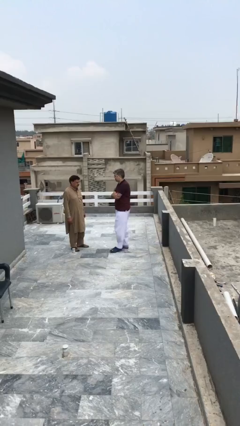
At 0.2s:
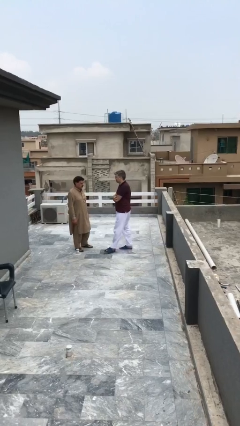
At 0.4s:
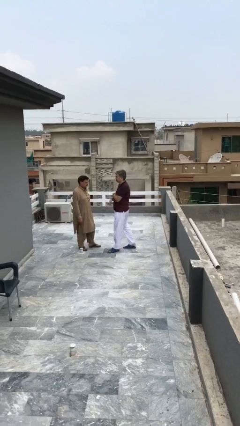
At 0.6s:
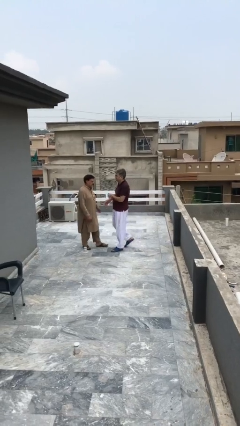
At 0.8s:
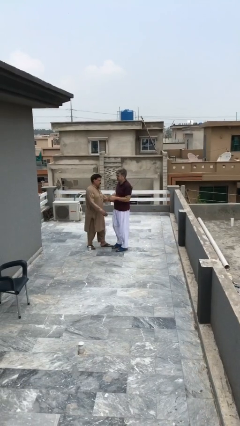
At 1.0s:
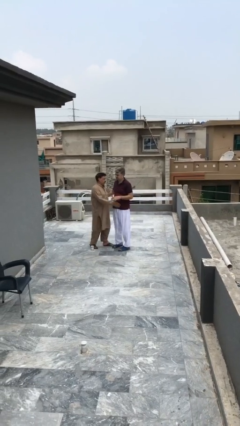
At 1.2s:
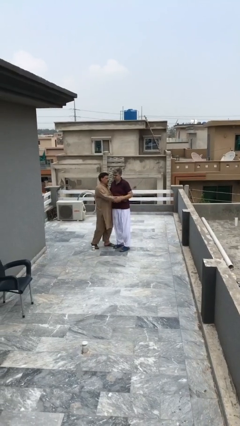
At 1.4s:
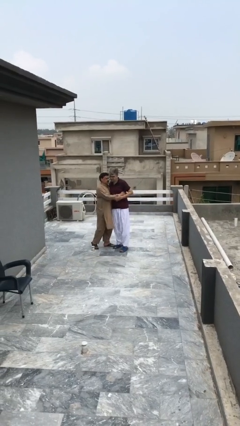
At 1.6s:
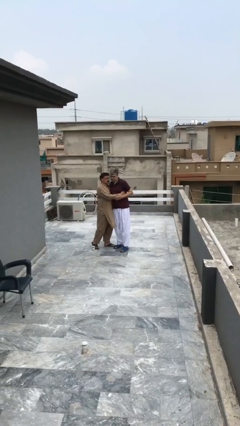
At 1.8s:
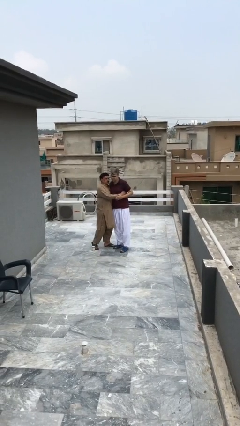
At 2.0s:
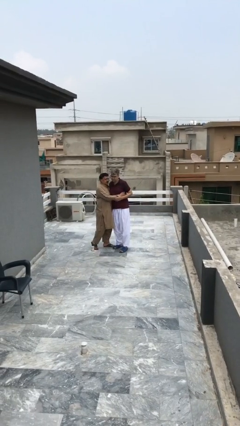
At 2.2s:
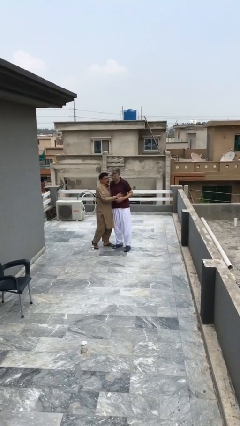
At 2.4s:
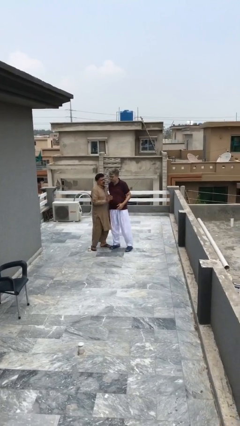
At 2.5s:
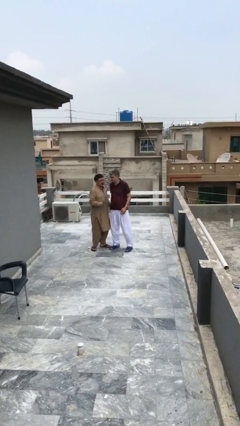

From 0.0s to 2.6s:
person embraces person

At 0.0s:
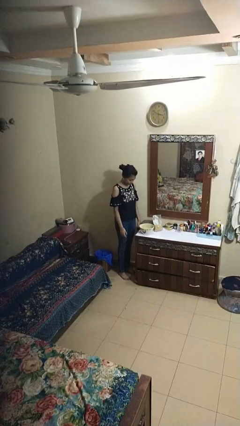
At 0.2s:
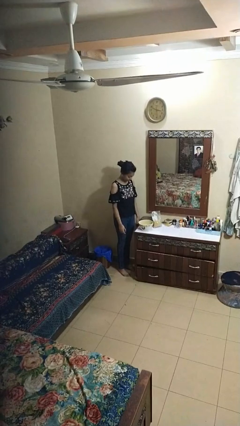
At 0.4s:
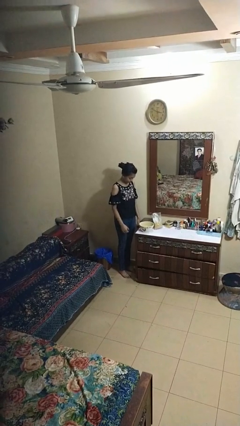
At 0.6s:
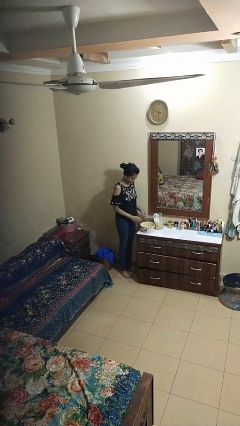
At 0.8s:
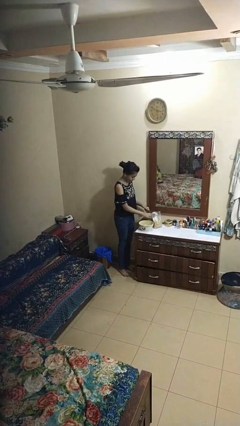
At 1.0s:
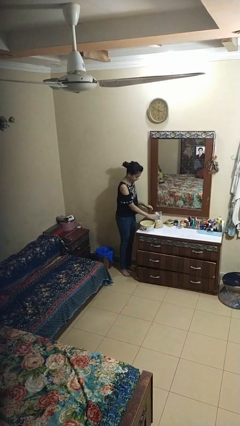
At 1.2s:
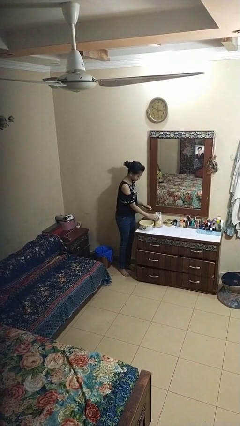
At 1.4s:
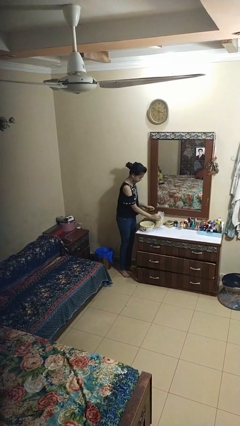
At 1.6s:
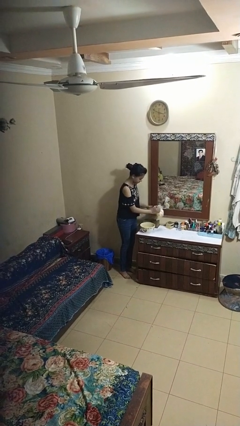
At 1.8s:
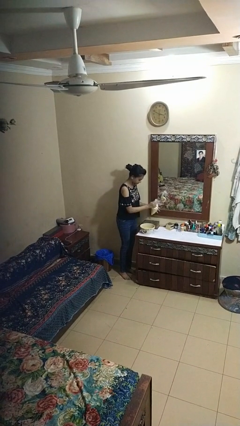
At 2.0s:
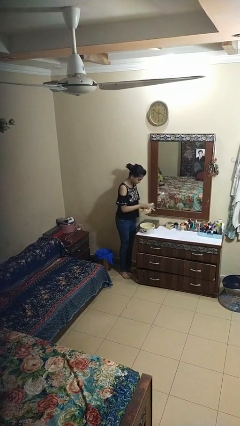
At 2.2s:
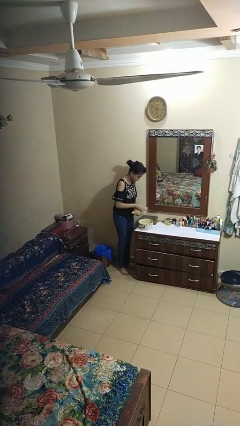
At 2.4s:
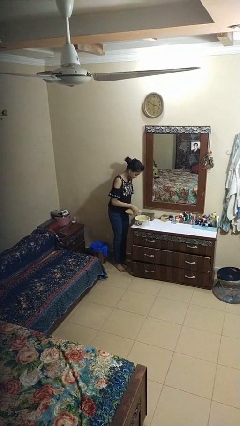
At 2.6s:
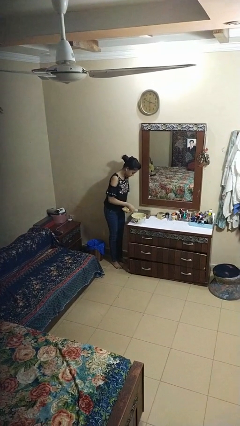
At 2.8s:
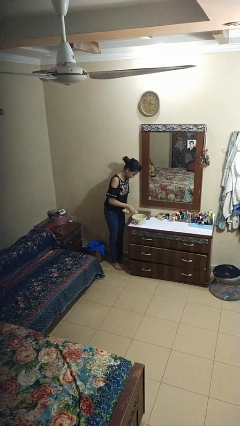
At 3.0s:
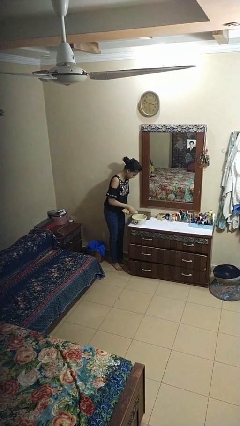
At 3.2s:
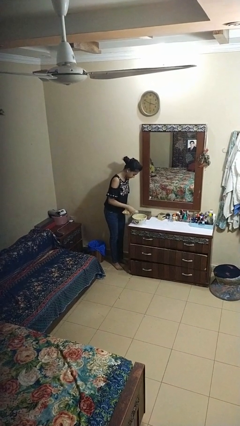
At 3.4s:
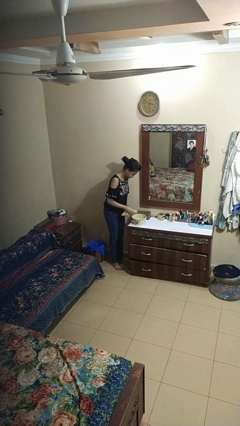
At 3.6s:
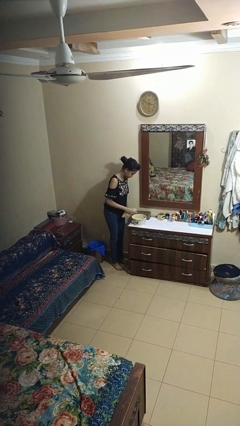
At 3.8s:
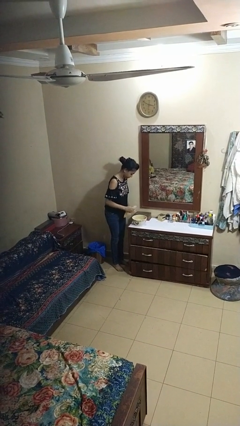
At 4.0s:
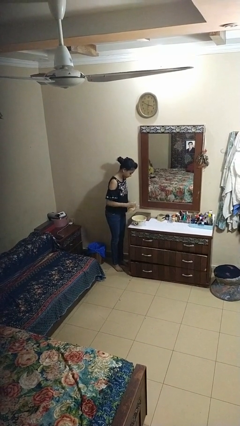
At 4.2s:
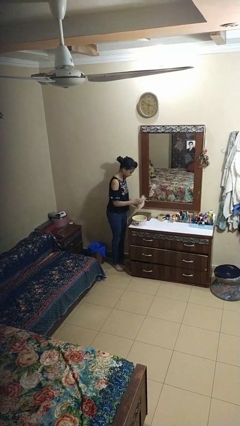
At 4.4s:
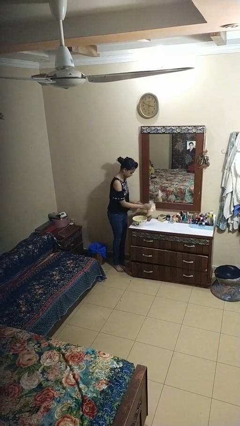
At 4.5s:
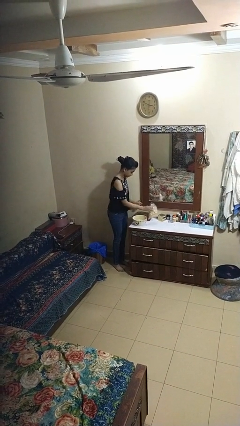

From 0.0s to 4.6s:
person pours into bowl

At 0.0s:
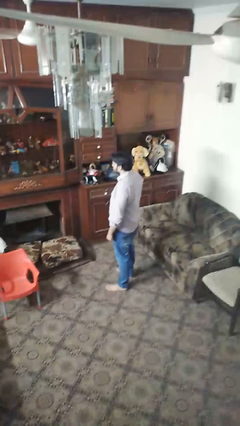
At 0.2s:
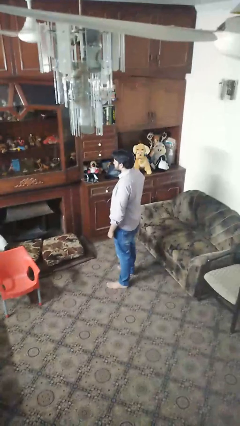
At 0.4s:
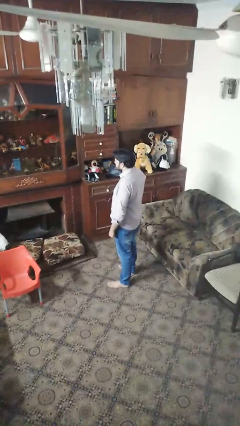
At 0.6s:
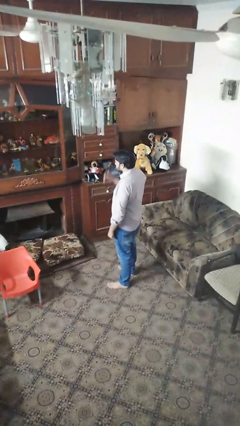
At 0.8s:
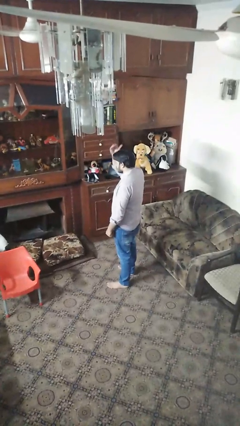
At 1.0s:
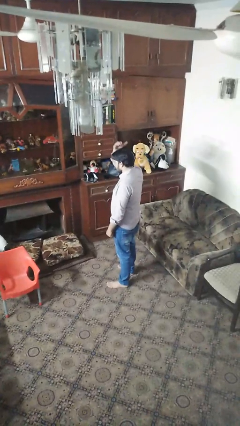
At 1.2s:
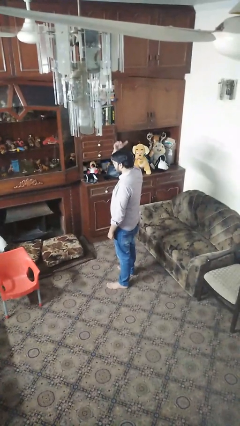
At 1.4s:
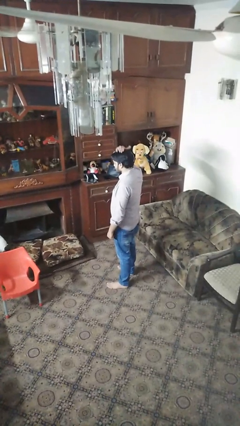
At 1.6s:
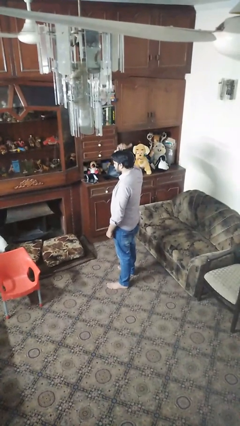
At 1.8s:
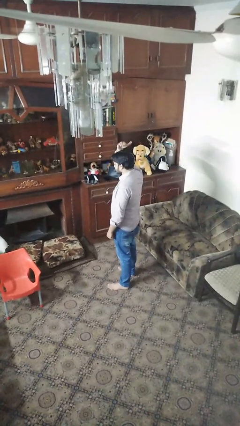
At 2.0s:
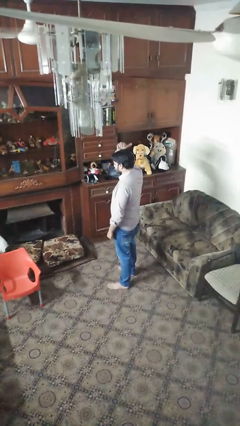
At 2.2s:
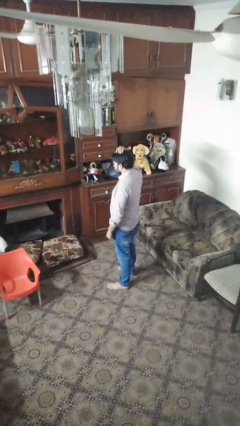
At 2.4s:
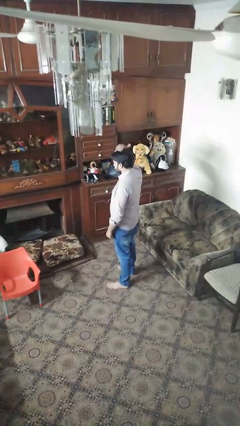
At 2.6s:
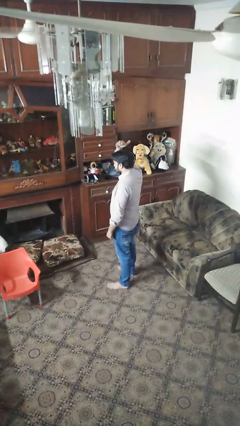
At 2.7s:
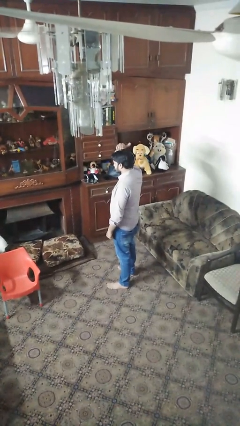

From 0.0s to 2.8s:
person pats head

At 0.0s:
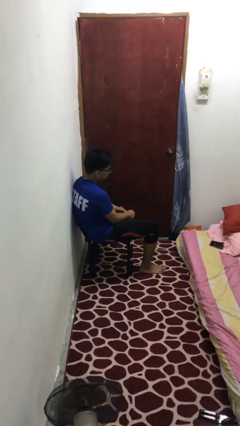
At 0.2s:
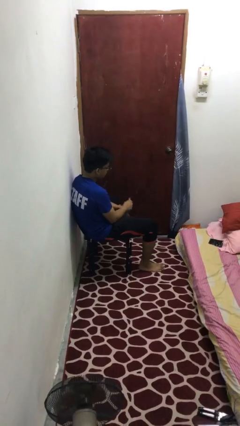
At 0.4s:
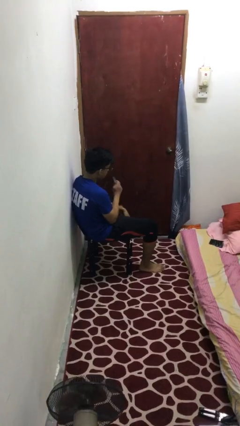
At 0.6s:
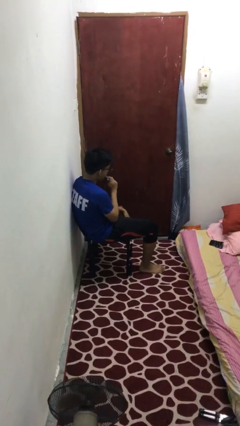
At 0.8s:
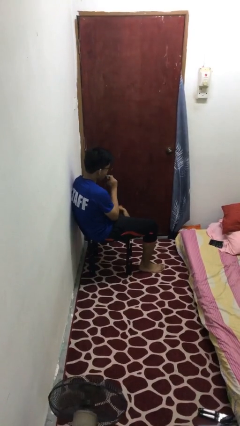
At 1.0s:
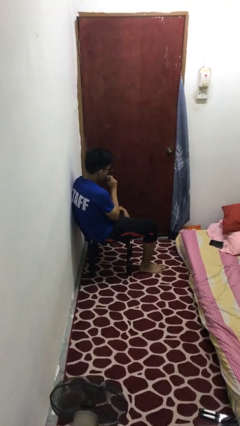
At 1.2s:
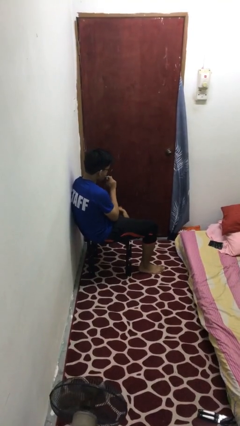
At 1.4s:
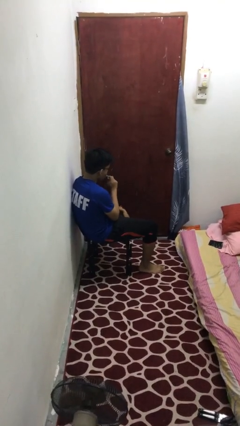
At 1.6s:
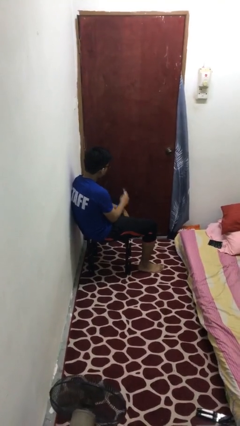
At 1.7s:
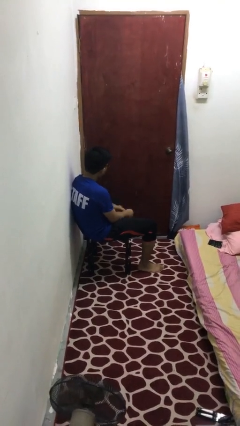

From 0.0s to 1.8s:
person vapes

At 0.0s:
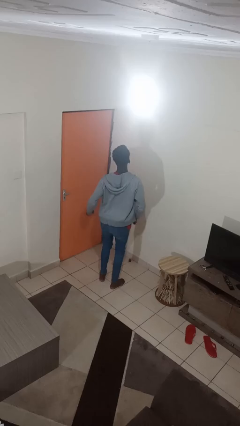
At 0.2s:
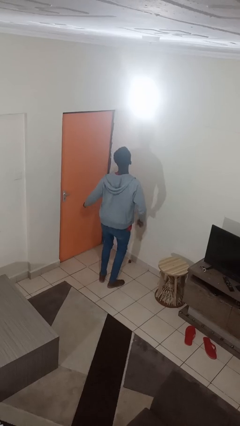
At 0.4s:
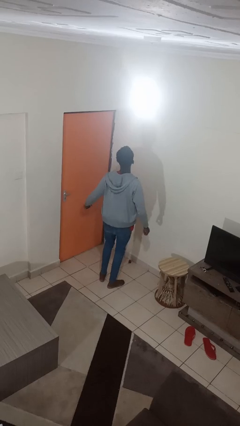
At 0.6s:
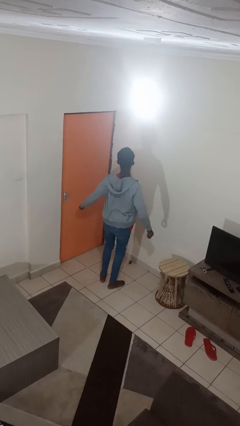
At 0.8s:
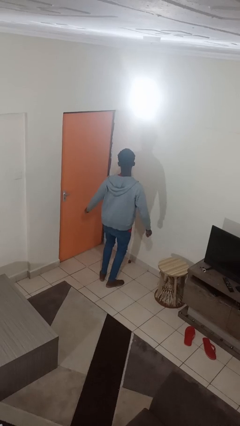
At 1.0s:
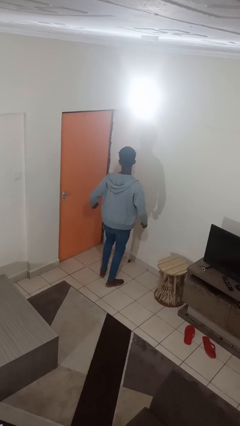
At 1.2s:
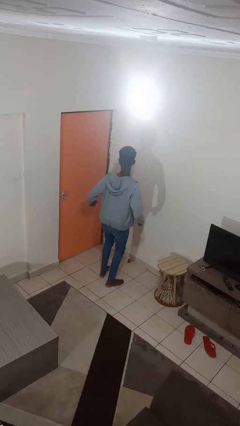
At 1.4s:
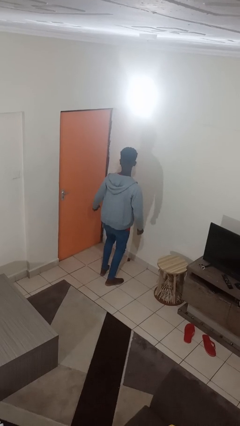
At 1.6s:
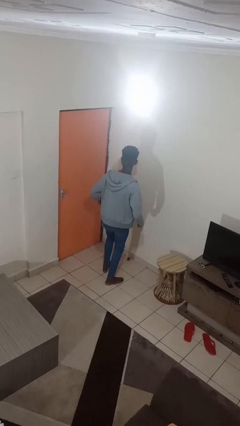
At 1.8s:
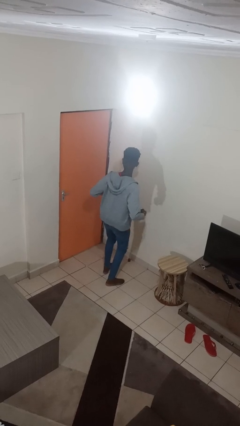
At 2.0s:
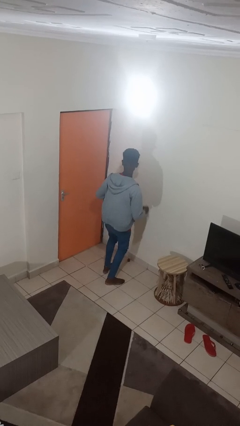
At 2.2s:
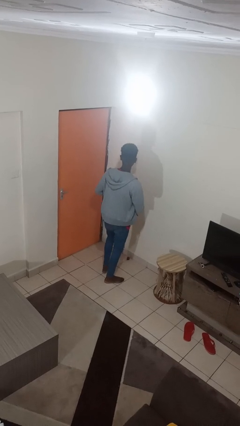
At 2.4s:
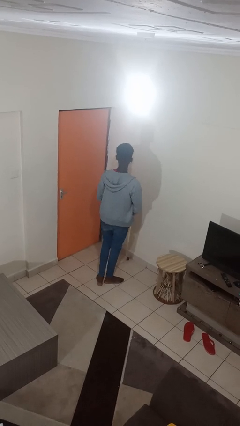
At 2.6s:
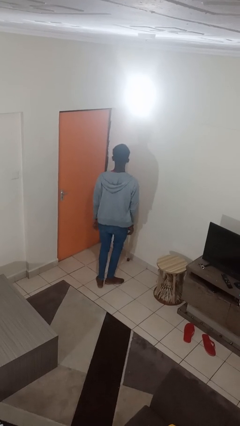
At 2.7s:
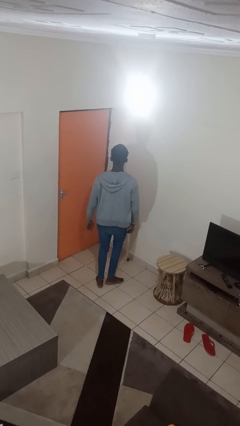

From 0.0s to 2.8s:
person dances in place

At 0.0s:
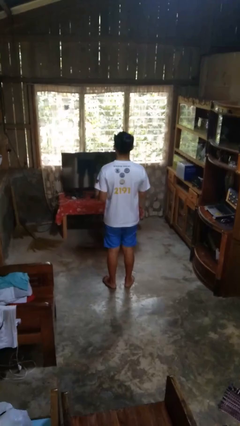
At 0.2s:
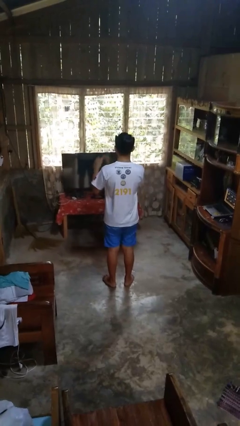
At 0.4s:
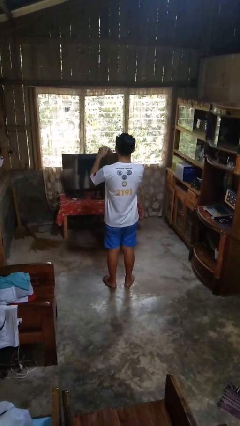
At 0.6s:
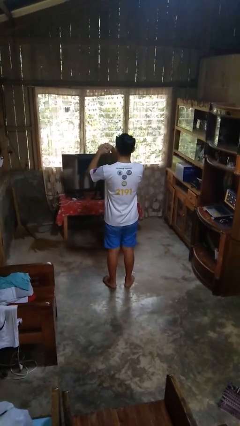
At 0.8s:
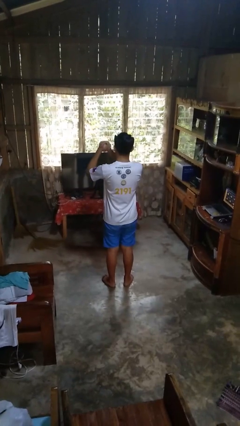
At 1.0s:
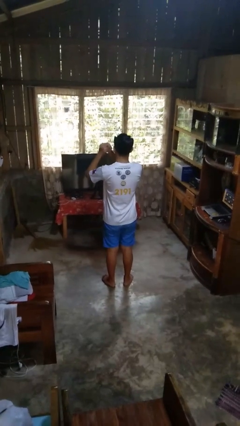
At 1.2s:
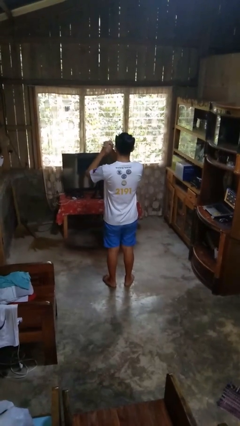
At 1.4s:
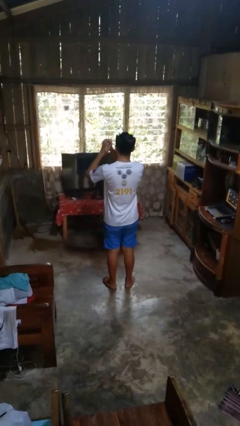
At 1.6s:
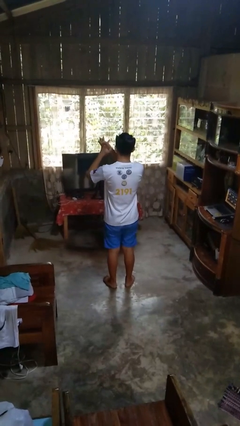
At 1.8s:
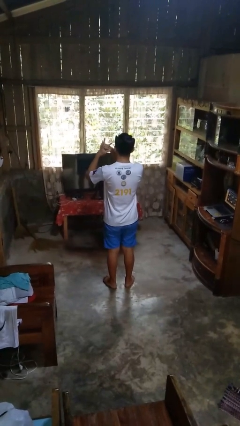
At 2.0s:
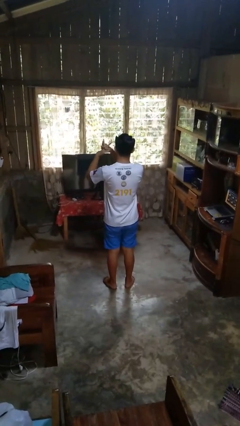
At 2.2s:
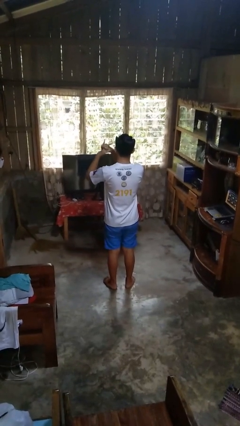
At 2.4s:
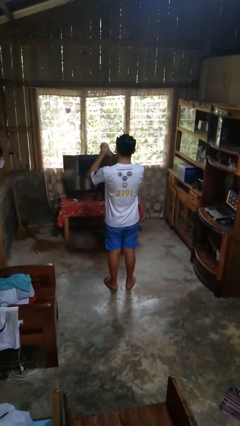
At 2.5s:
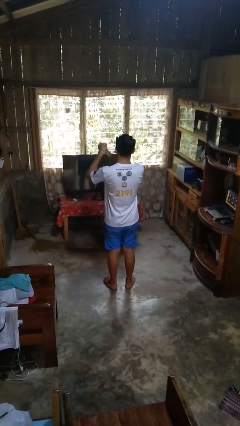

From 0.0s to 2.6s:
person cracks knuckles

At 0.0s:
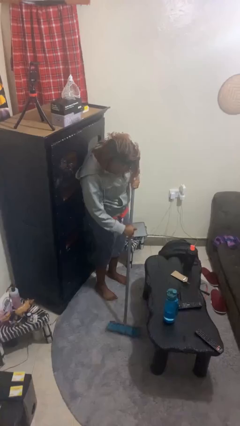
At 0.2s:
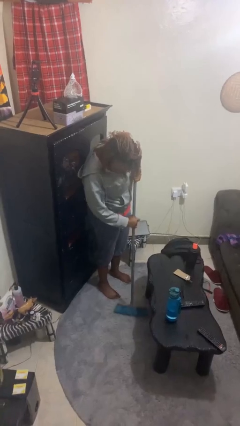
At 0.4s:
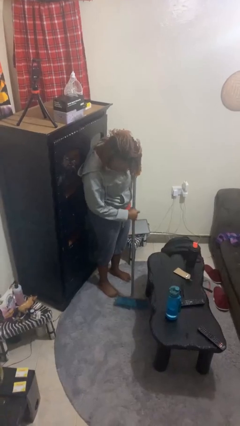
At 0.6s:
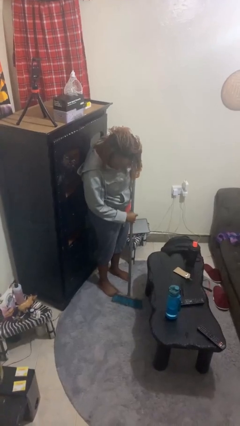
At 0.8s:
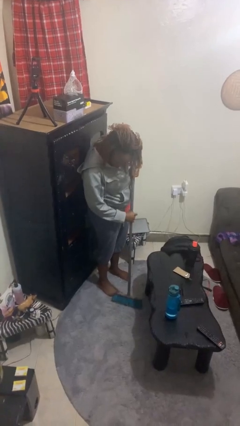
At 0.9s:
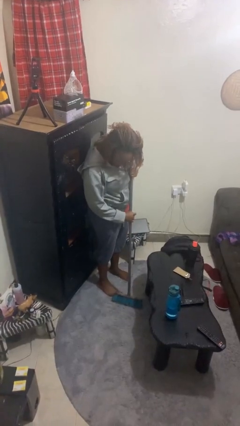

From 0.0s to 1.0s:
person sweeps floor
